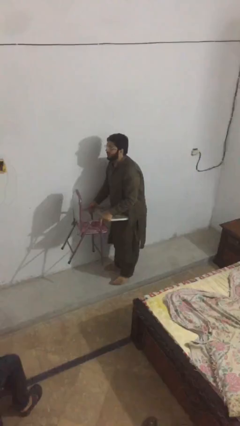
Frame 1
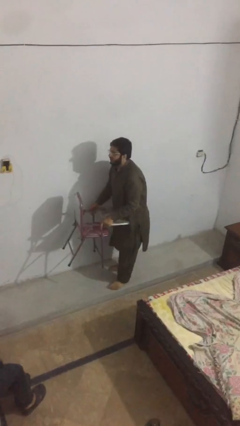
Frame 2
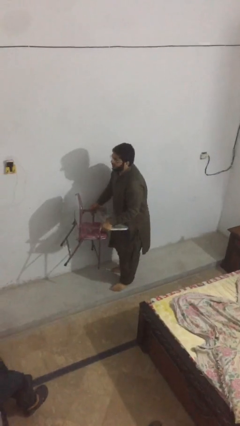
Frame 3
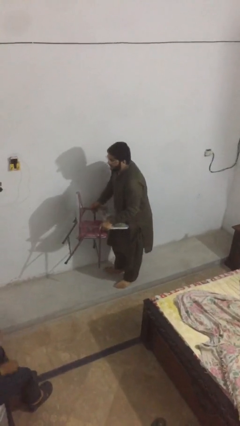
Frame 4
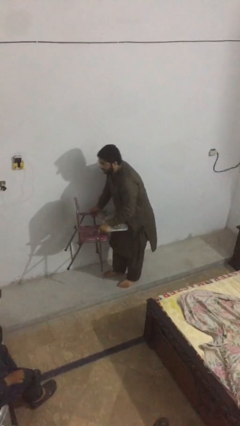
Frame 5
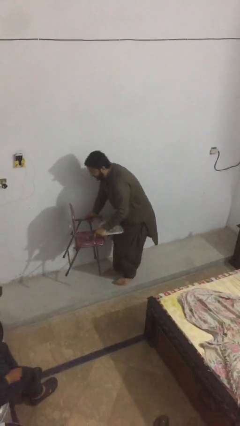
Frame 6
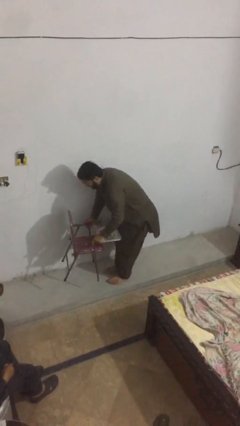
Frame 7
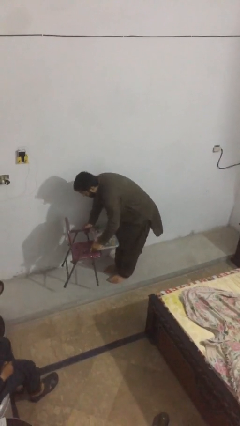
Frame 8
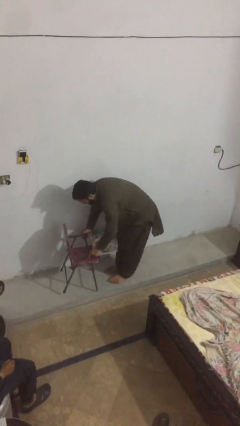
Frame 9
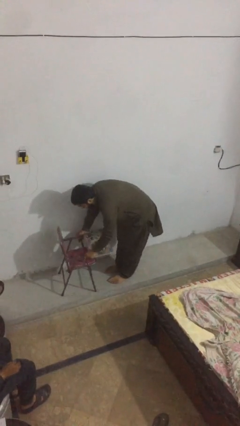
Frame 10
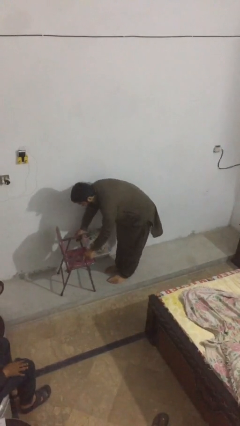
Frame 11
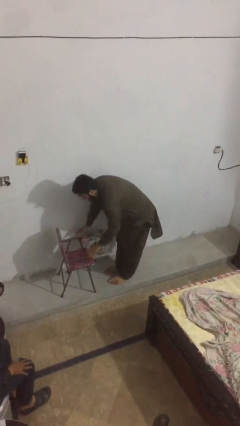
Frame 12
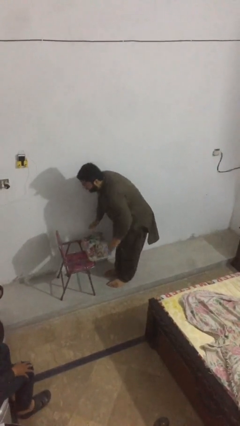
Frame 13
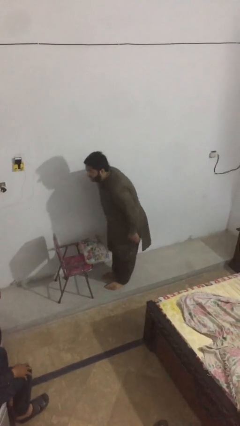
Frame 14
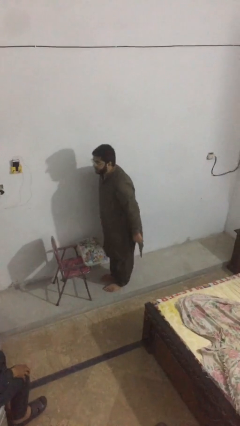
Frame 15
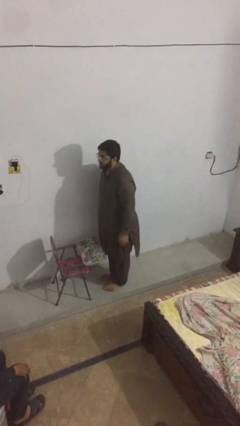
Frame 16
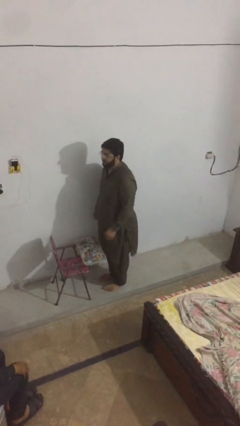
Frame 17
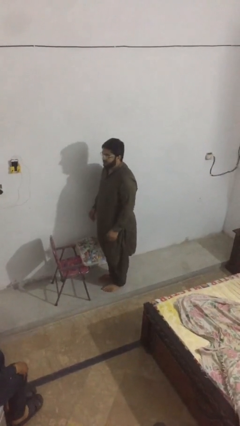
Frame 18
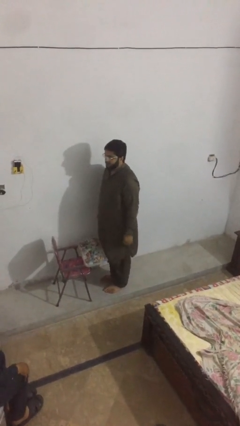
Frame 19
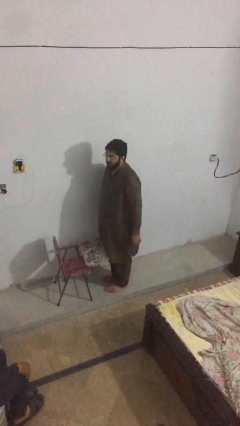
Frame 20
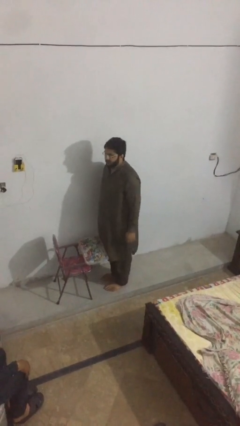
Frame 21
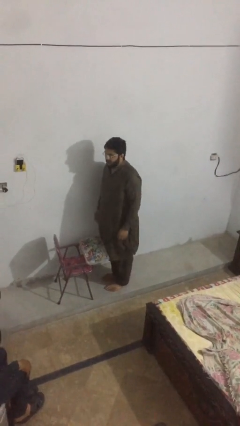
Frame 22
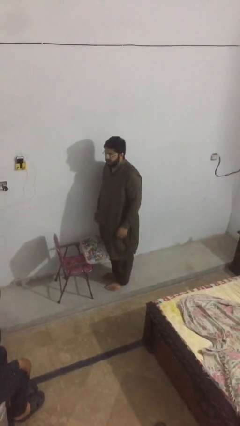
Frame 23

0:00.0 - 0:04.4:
person puts down object on floor

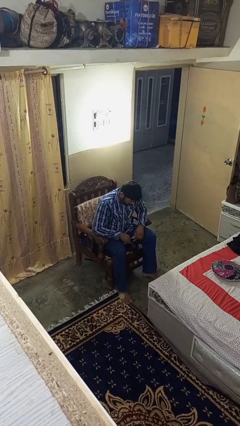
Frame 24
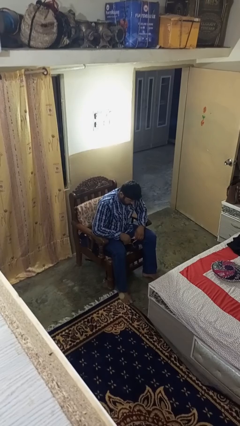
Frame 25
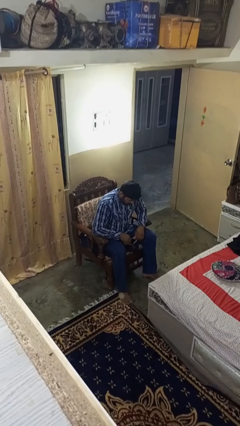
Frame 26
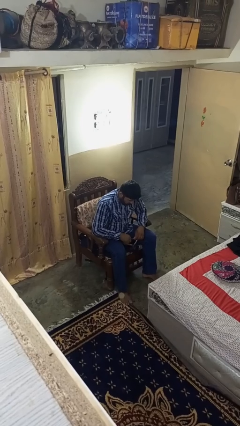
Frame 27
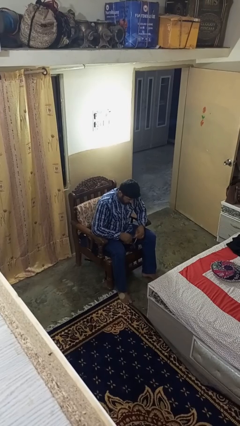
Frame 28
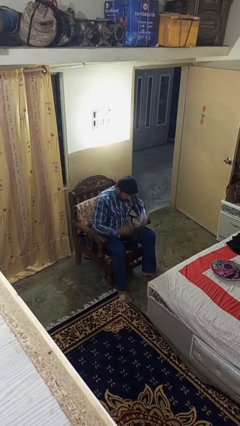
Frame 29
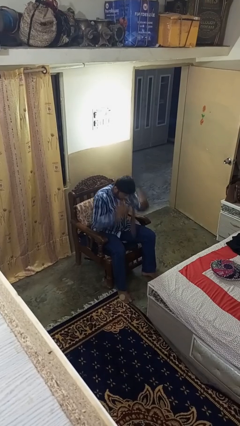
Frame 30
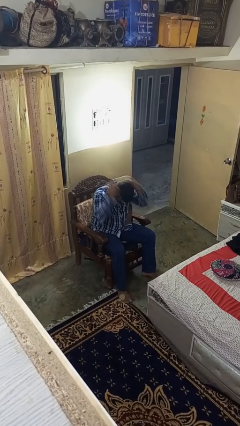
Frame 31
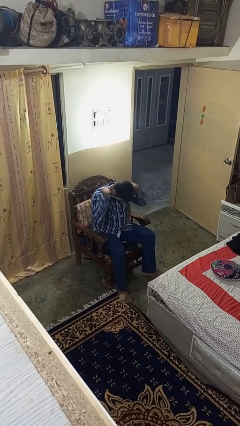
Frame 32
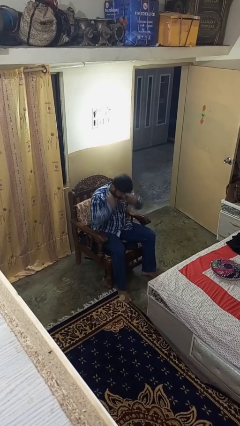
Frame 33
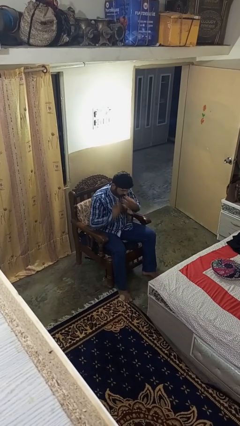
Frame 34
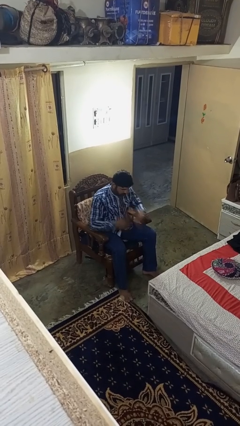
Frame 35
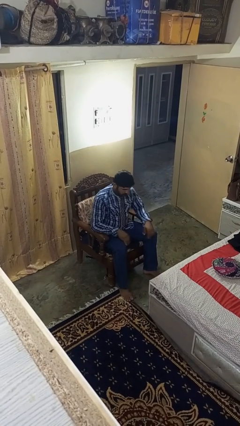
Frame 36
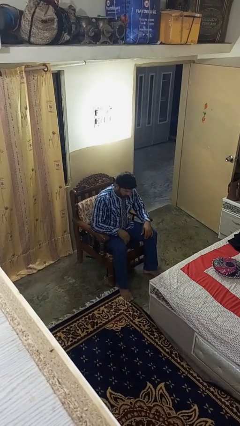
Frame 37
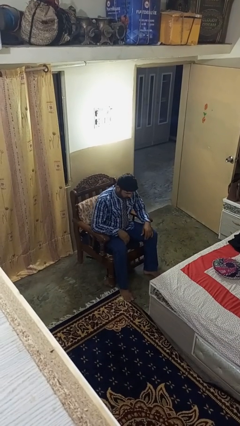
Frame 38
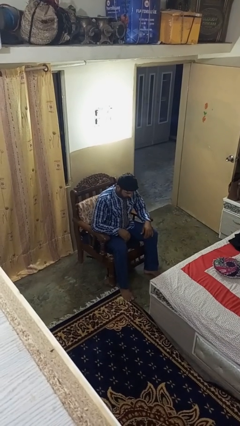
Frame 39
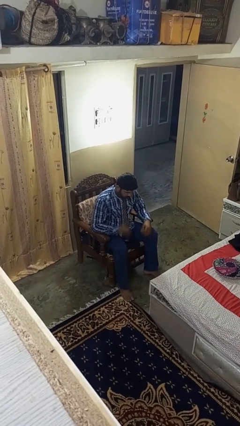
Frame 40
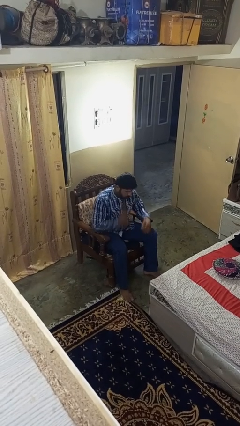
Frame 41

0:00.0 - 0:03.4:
person puts on necktie

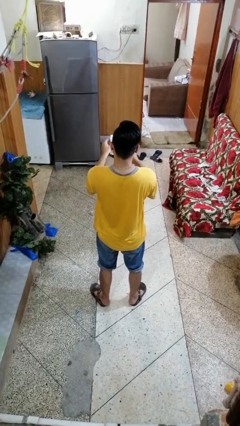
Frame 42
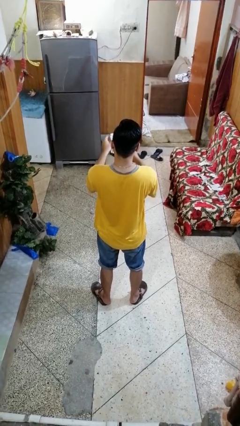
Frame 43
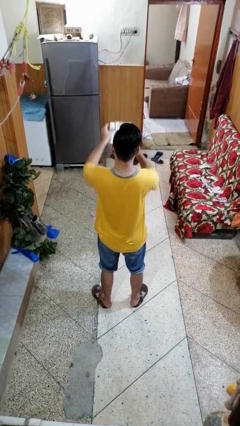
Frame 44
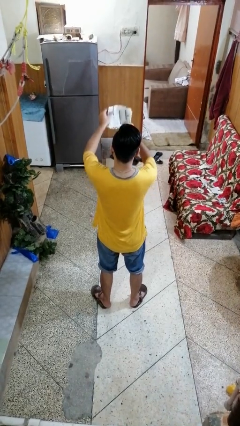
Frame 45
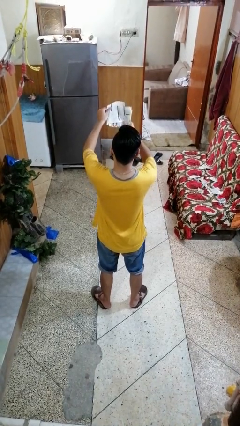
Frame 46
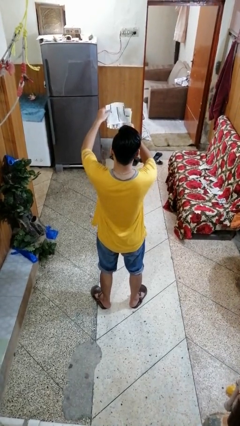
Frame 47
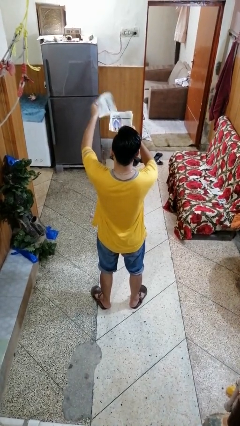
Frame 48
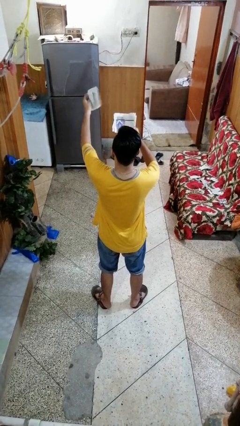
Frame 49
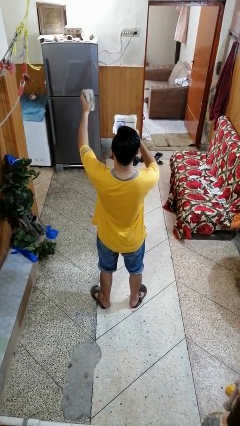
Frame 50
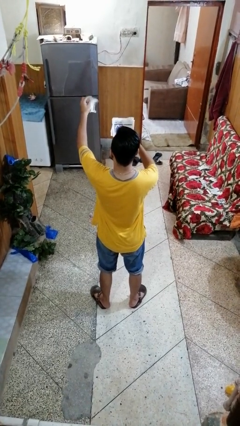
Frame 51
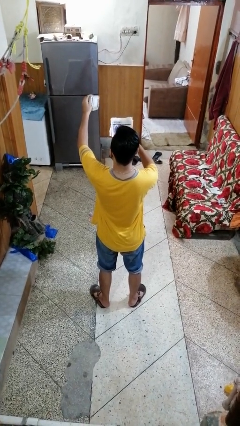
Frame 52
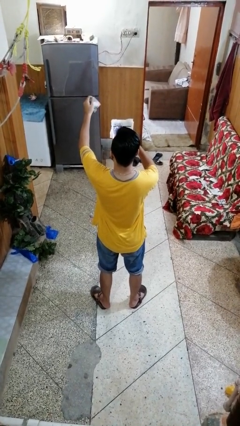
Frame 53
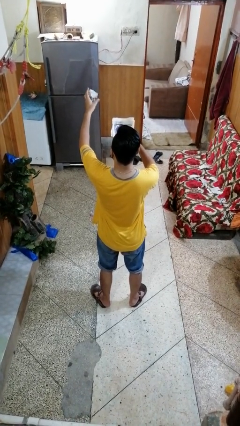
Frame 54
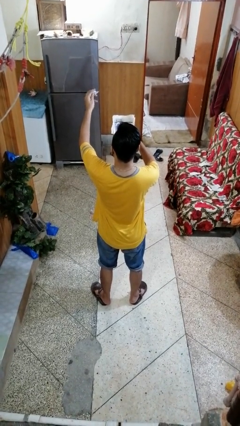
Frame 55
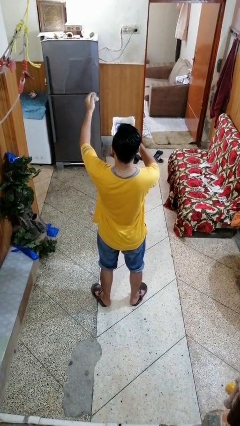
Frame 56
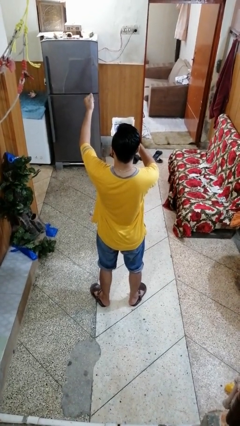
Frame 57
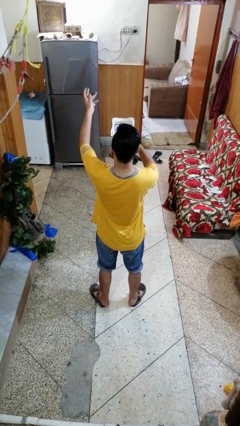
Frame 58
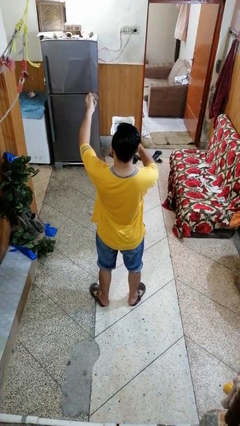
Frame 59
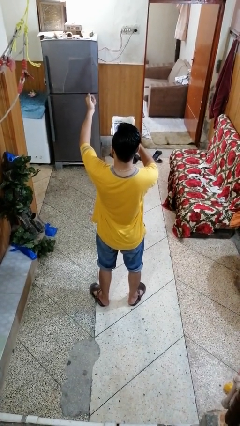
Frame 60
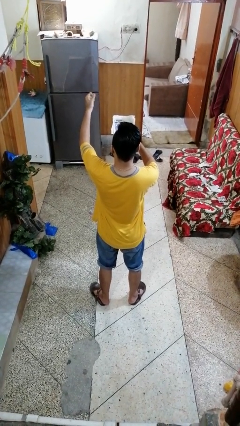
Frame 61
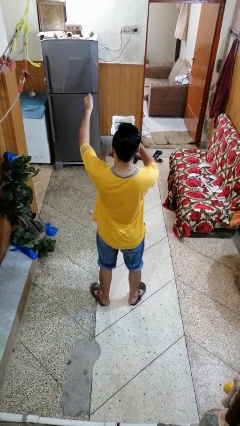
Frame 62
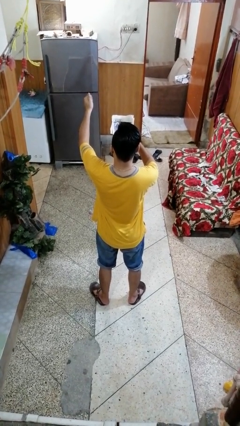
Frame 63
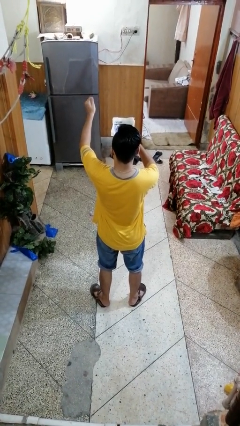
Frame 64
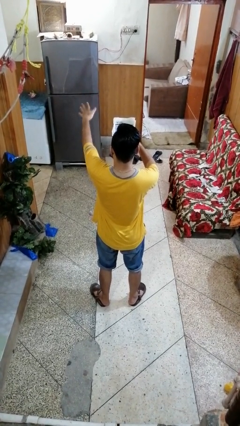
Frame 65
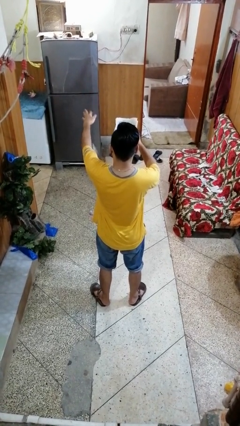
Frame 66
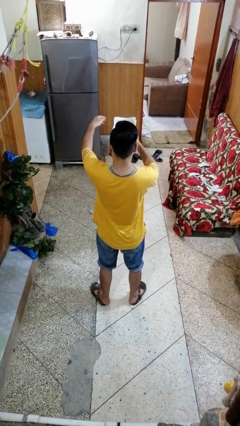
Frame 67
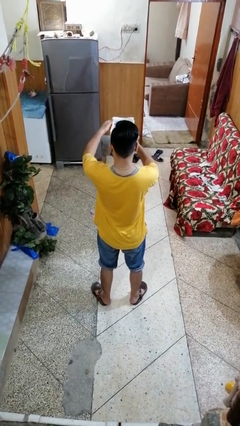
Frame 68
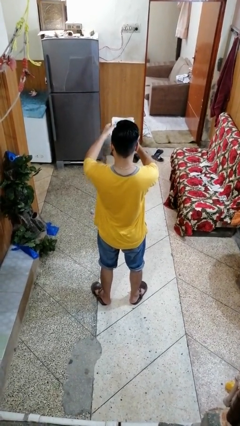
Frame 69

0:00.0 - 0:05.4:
person crumples paper

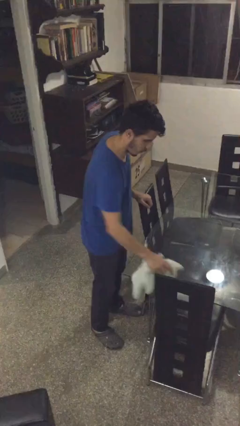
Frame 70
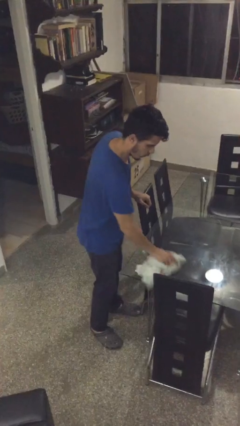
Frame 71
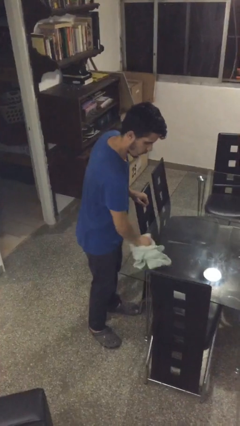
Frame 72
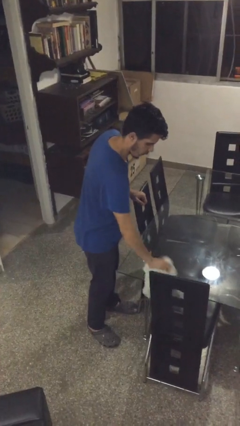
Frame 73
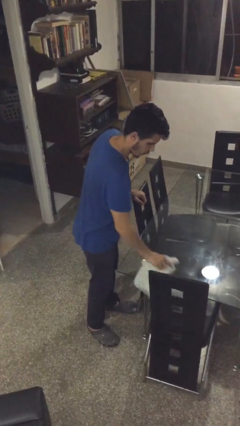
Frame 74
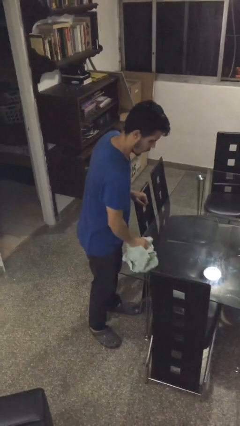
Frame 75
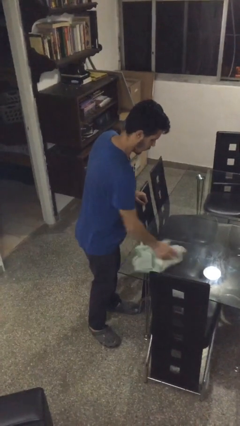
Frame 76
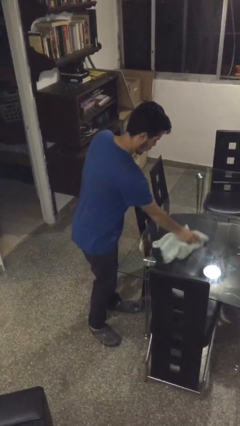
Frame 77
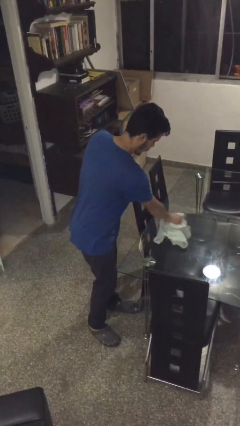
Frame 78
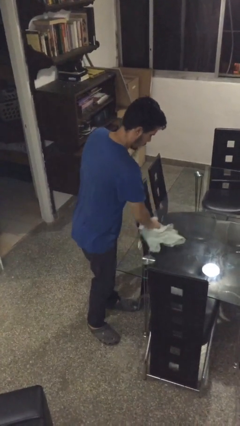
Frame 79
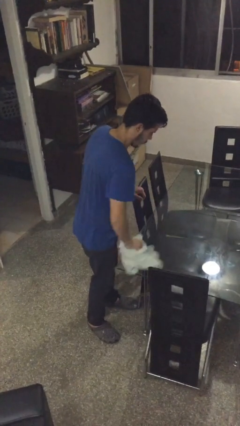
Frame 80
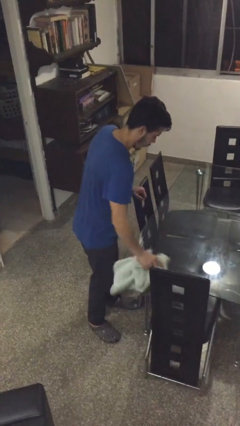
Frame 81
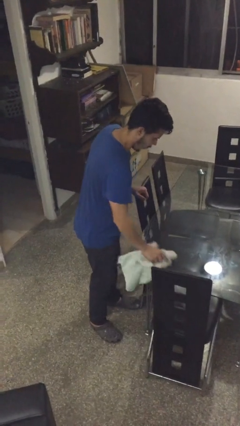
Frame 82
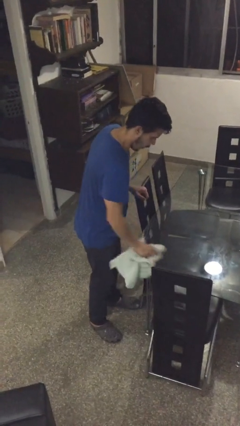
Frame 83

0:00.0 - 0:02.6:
person cleans table with rag

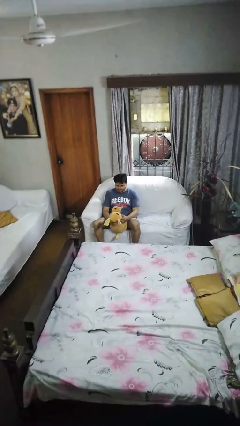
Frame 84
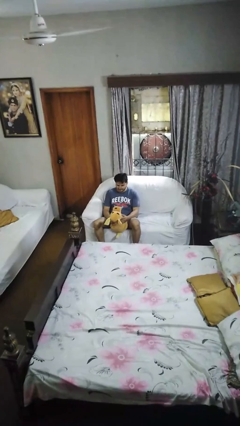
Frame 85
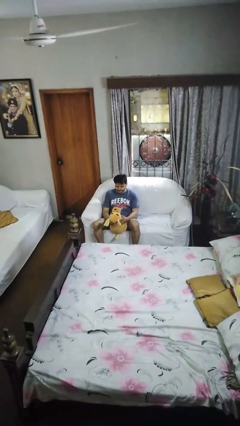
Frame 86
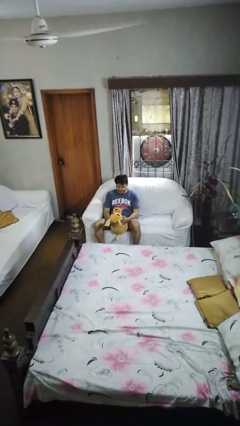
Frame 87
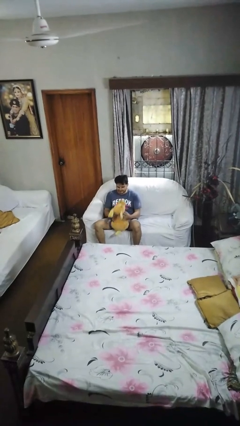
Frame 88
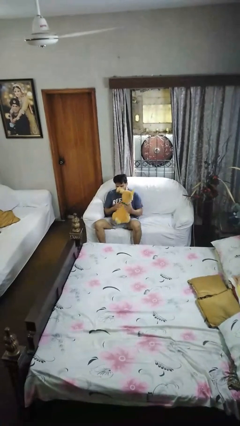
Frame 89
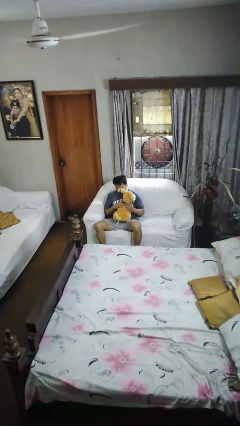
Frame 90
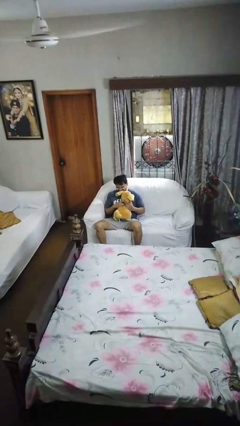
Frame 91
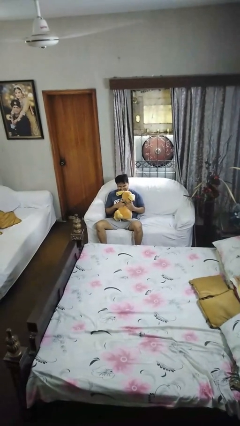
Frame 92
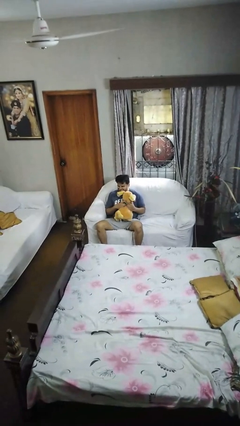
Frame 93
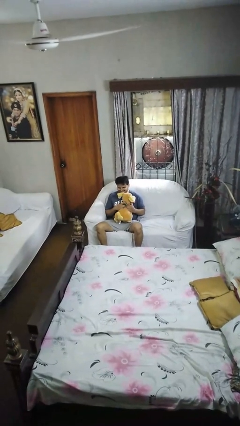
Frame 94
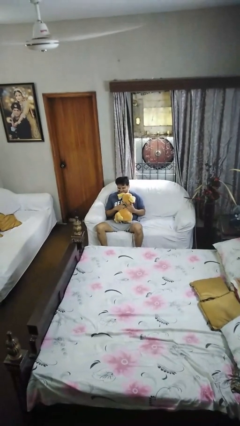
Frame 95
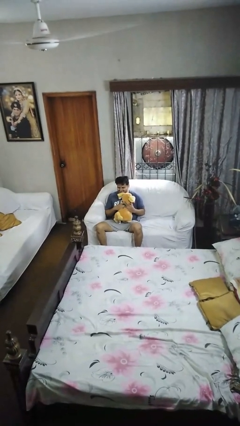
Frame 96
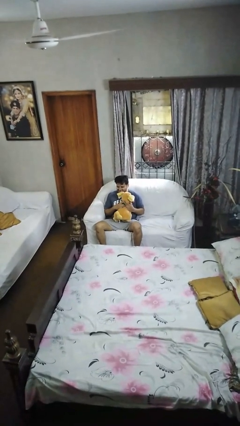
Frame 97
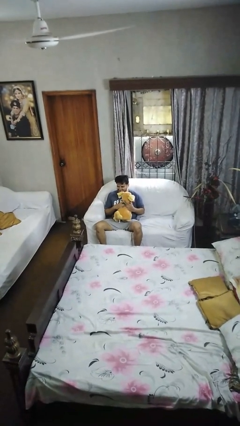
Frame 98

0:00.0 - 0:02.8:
person hugs stuffed animal
